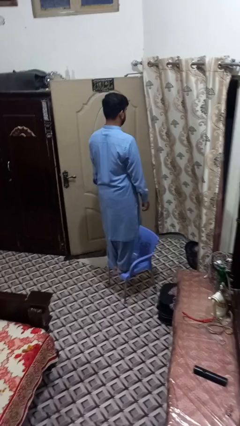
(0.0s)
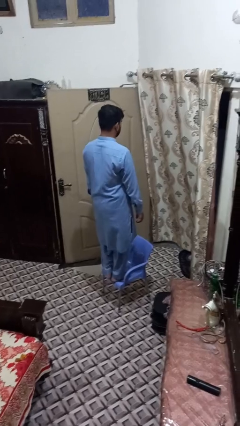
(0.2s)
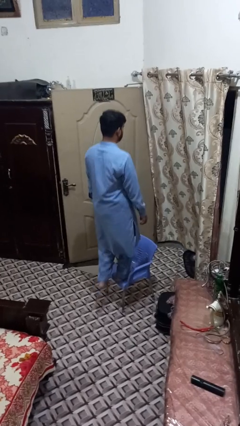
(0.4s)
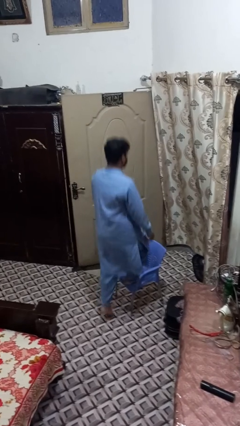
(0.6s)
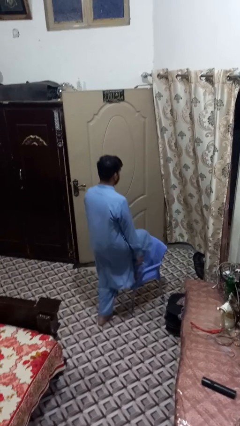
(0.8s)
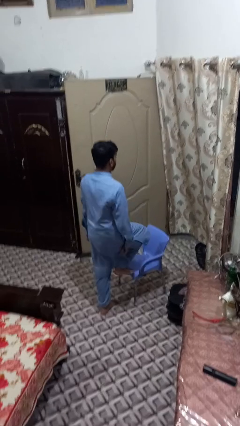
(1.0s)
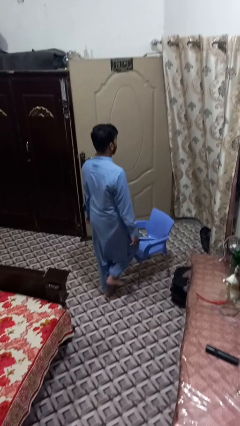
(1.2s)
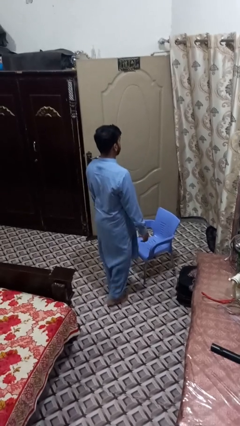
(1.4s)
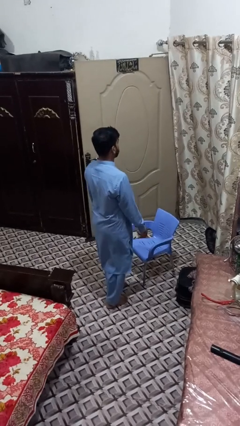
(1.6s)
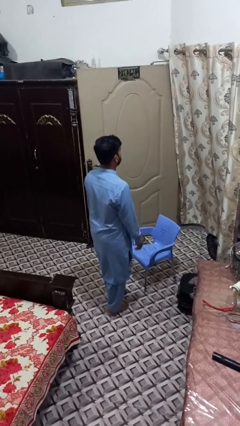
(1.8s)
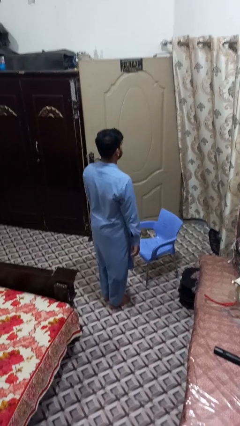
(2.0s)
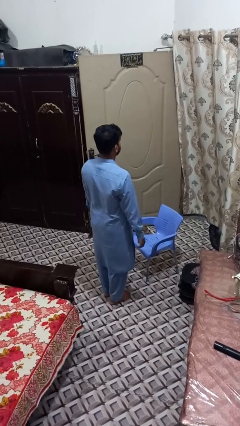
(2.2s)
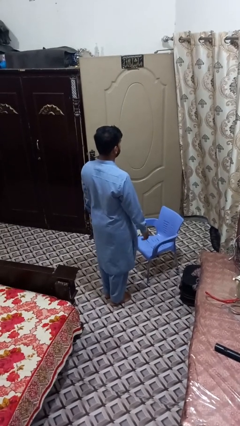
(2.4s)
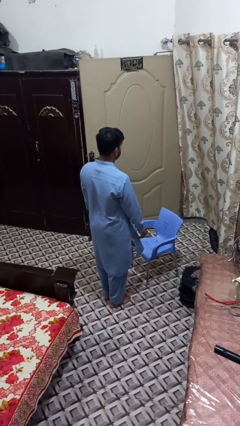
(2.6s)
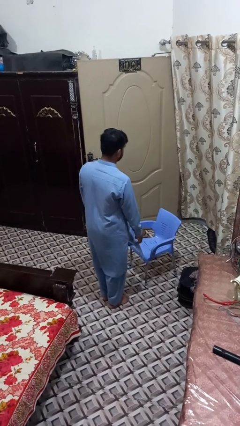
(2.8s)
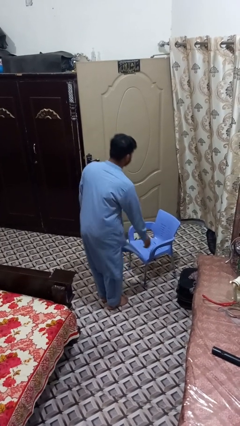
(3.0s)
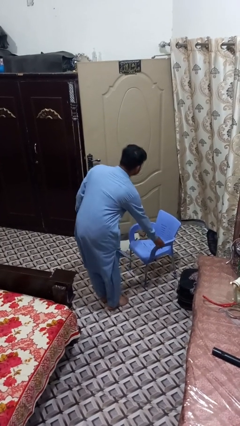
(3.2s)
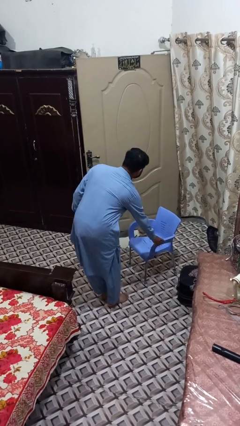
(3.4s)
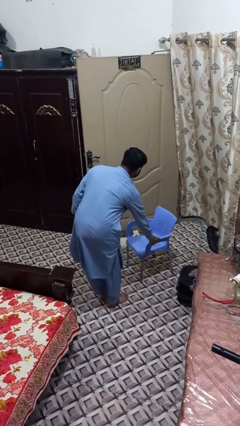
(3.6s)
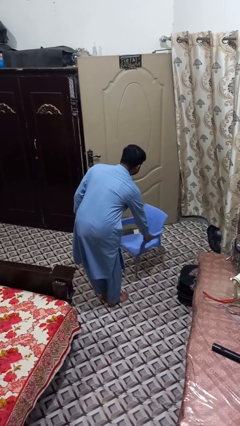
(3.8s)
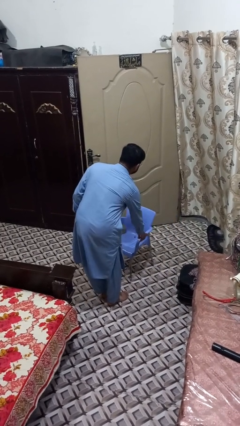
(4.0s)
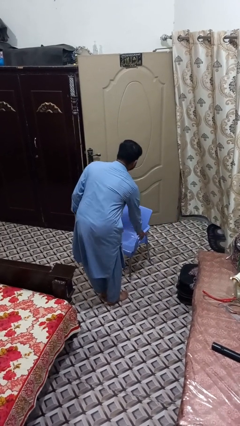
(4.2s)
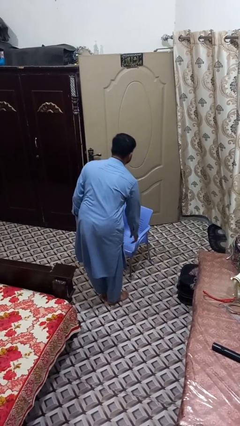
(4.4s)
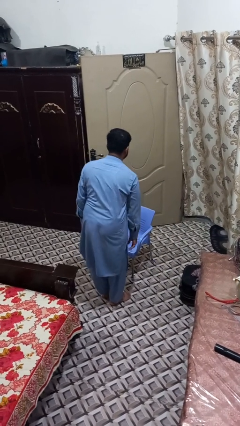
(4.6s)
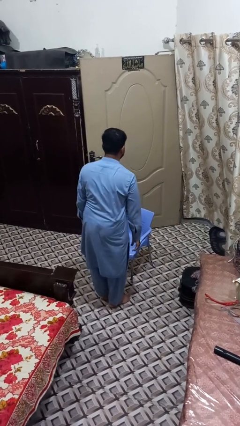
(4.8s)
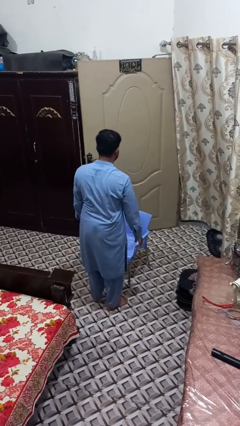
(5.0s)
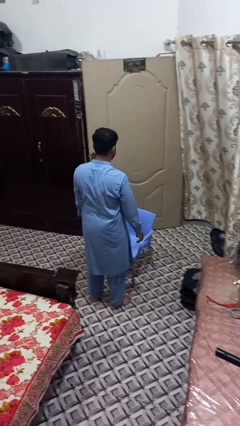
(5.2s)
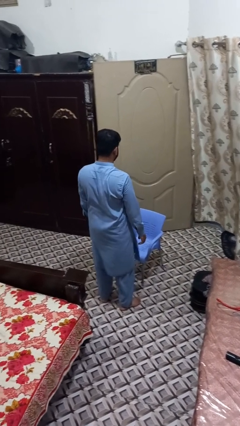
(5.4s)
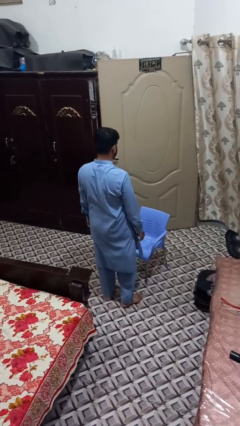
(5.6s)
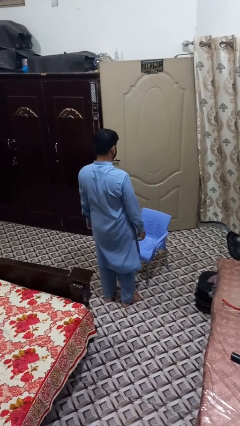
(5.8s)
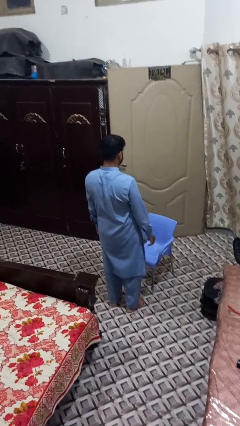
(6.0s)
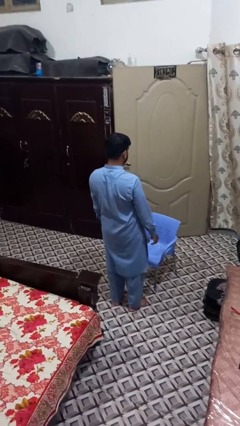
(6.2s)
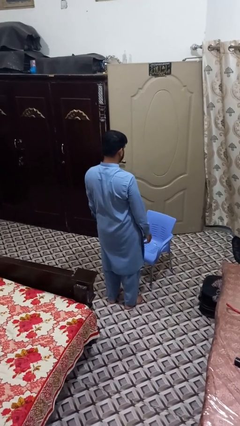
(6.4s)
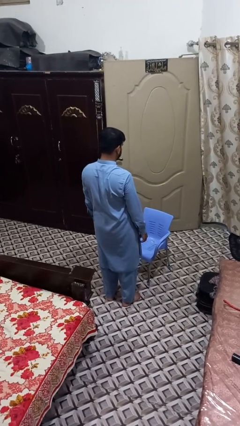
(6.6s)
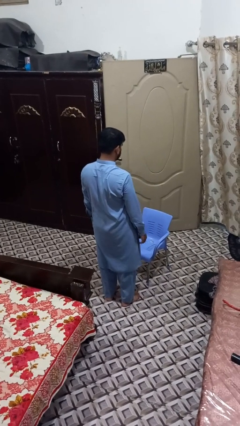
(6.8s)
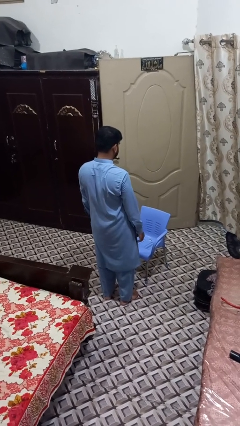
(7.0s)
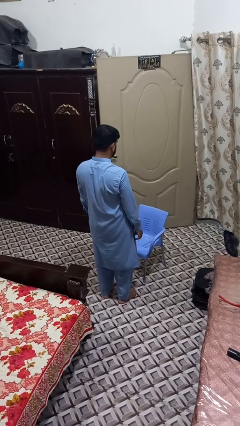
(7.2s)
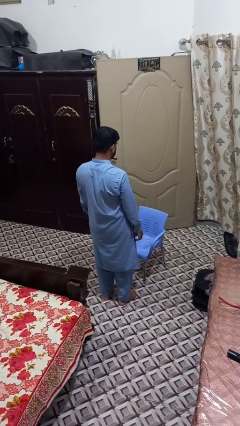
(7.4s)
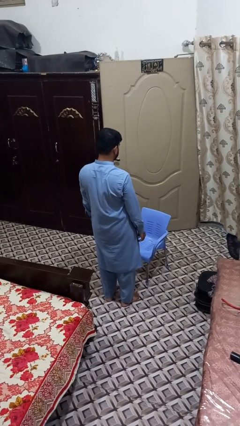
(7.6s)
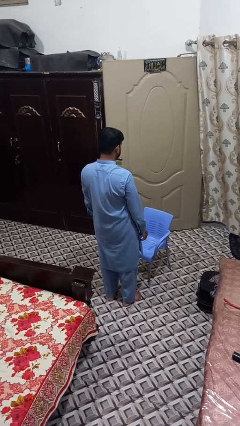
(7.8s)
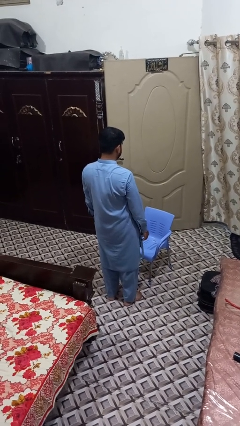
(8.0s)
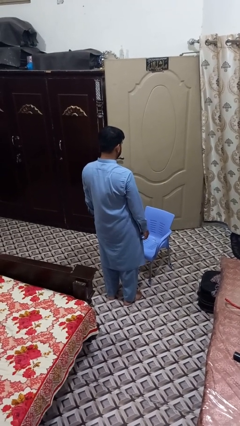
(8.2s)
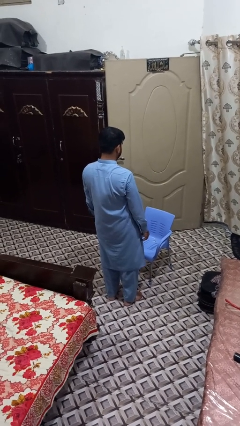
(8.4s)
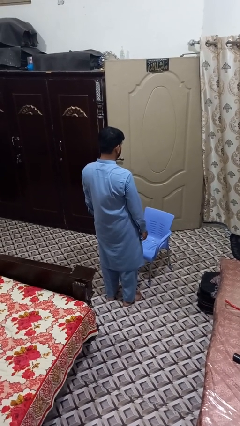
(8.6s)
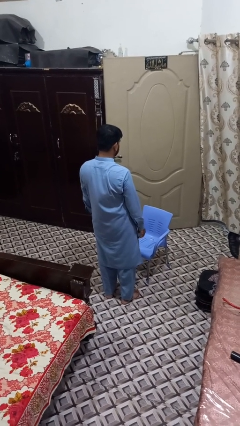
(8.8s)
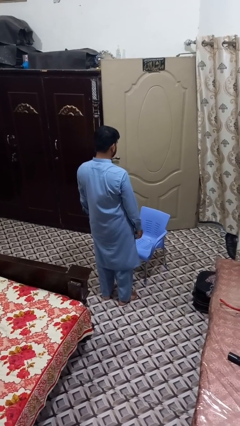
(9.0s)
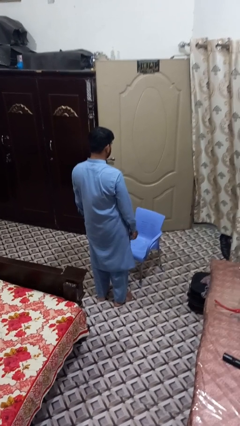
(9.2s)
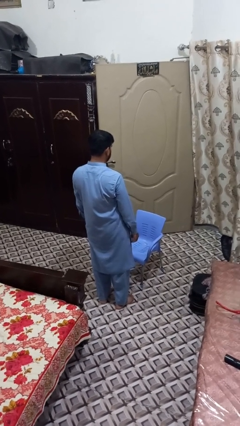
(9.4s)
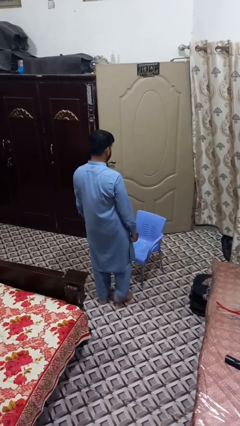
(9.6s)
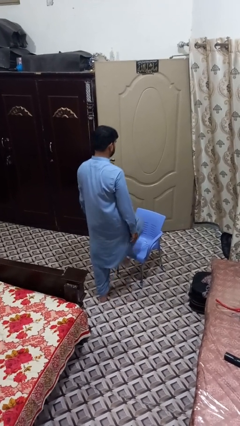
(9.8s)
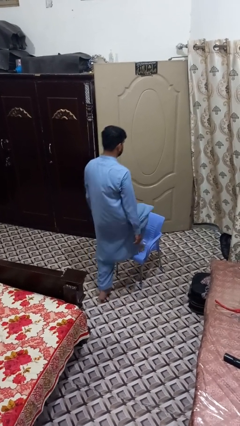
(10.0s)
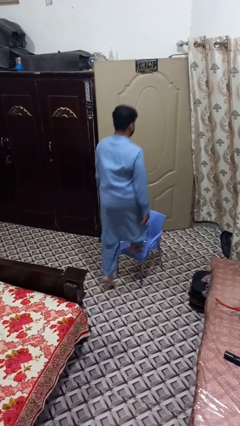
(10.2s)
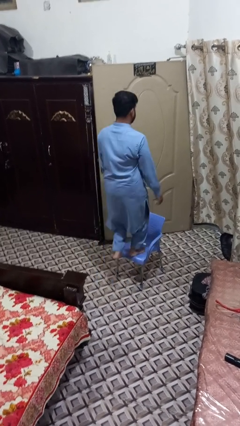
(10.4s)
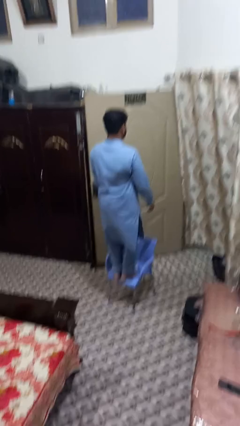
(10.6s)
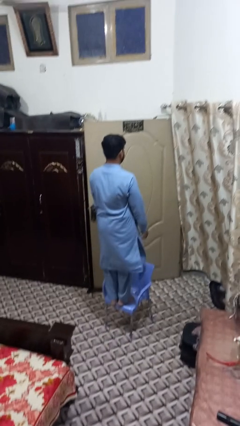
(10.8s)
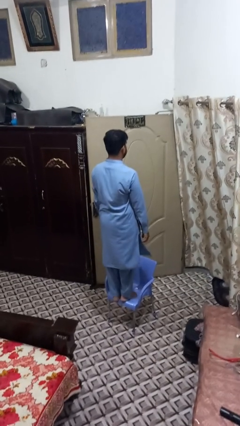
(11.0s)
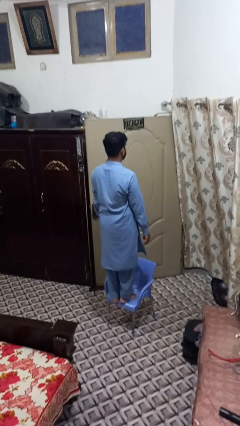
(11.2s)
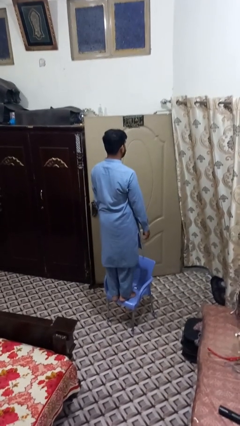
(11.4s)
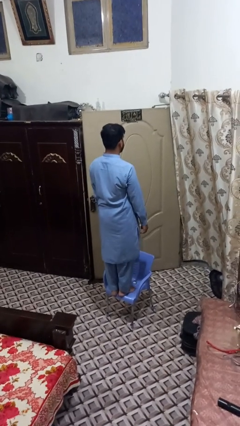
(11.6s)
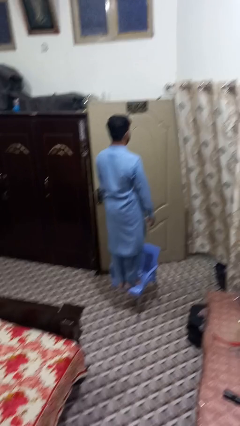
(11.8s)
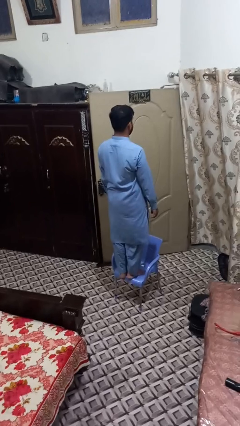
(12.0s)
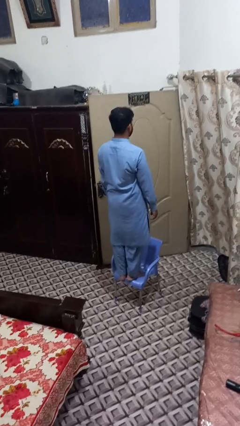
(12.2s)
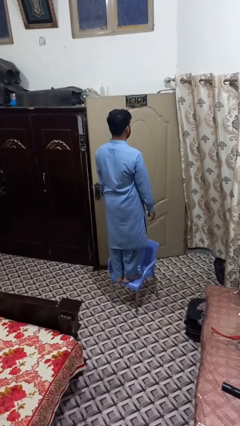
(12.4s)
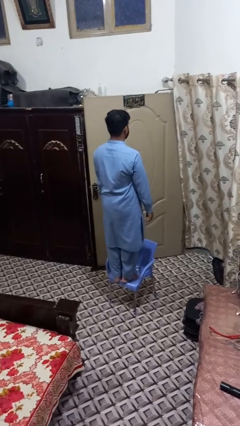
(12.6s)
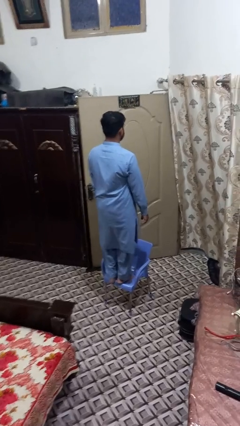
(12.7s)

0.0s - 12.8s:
person climbs off chair

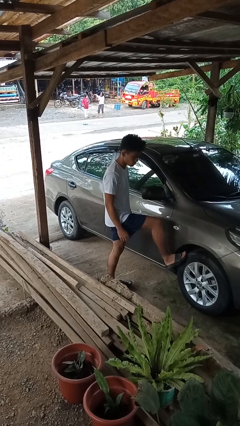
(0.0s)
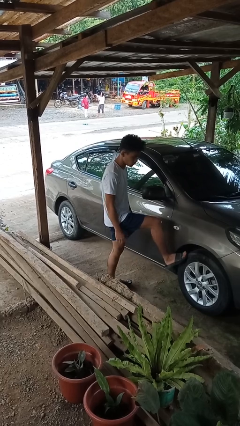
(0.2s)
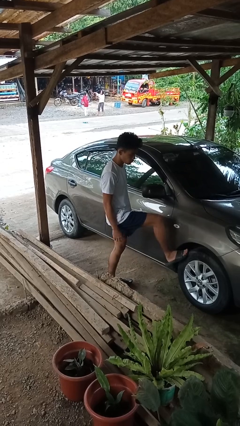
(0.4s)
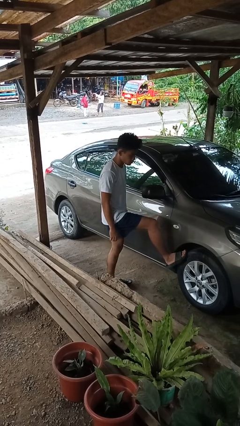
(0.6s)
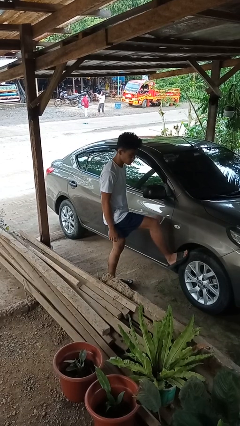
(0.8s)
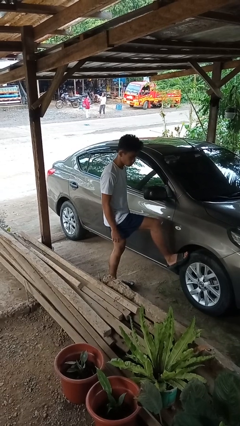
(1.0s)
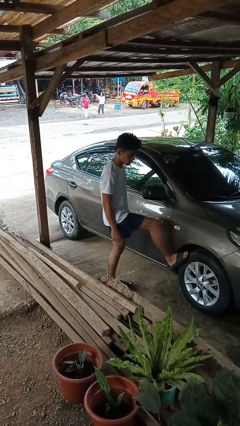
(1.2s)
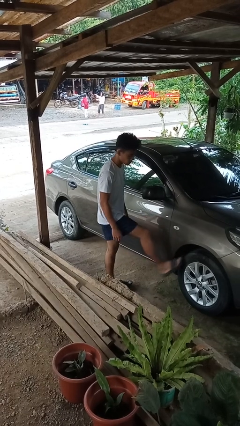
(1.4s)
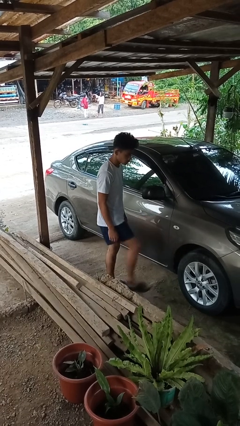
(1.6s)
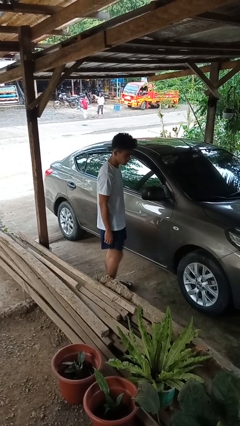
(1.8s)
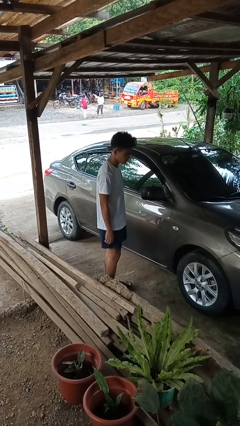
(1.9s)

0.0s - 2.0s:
person kicks car tires

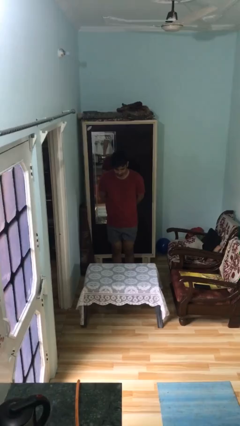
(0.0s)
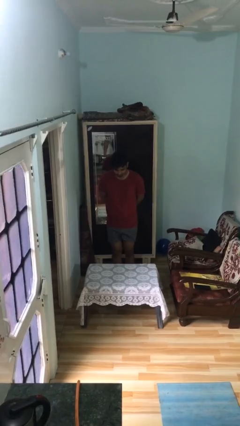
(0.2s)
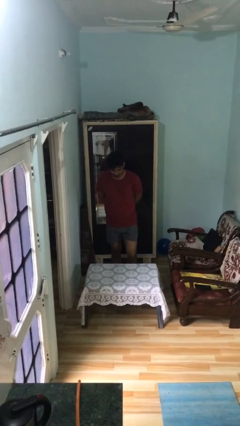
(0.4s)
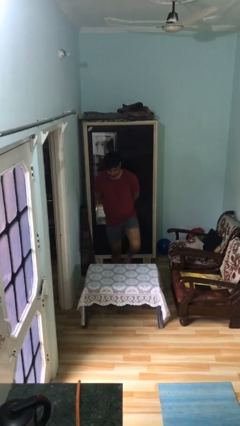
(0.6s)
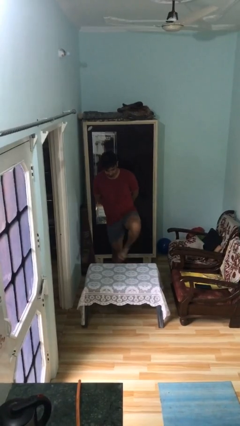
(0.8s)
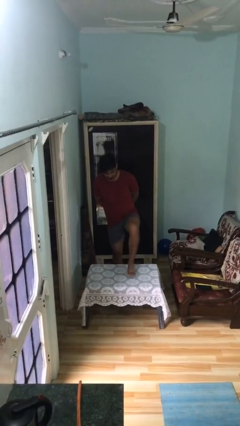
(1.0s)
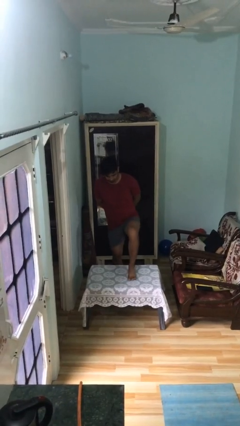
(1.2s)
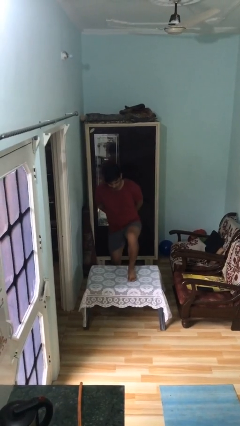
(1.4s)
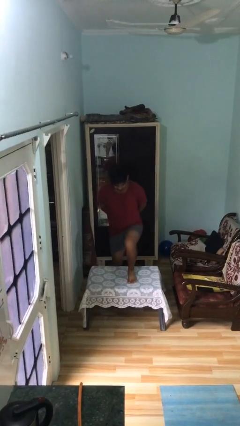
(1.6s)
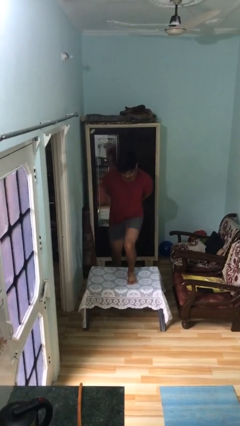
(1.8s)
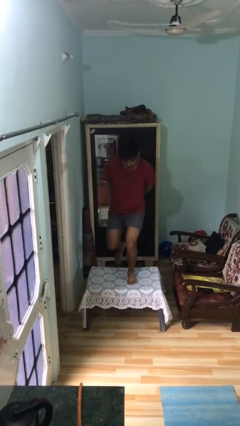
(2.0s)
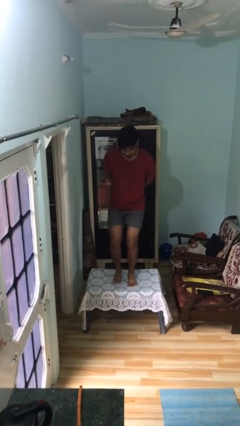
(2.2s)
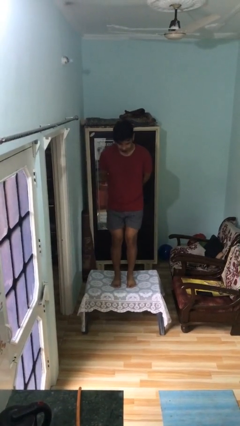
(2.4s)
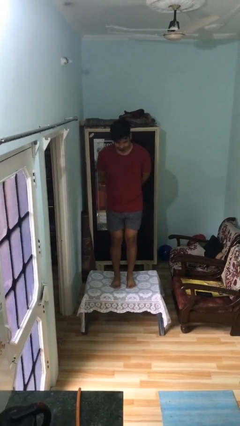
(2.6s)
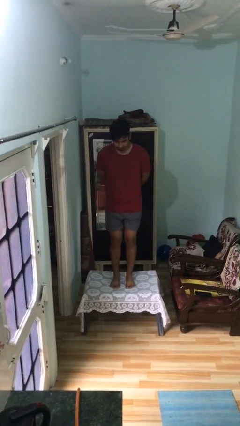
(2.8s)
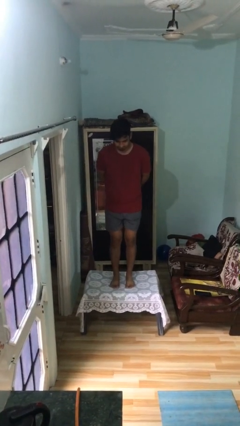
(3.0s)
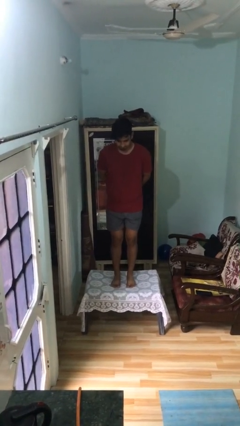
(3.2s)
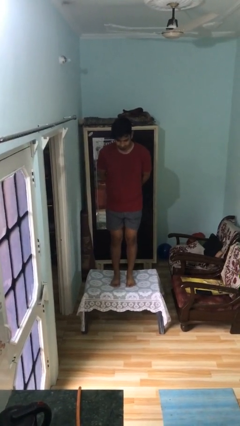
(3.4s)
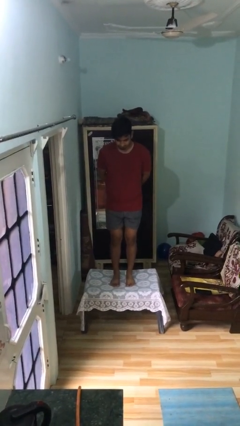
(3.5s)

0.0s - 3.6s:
person climbs on table
